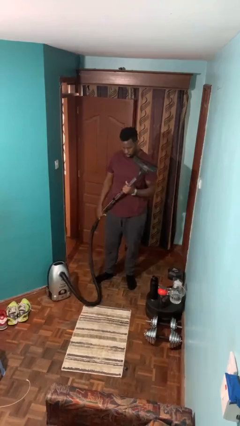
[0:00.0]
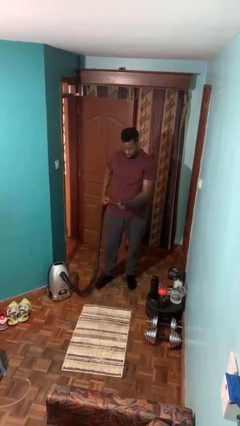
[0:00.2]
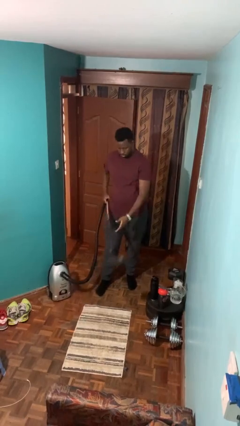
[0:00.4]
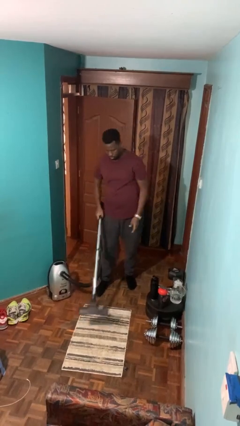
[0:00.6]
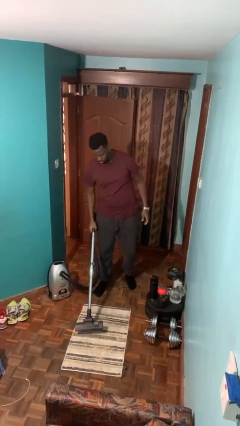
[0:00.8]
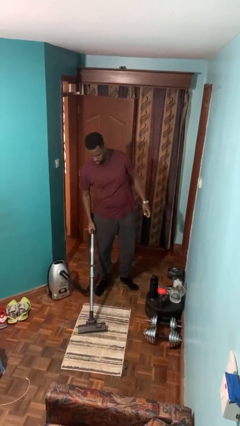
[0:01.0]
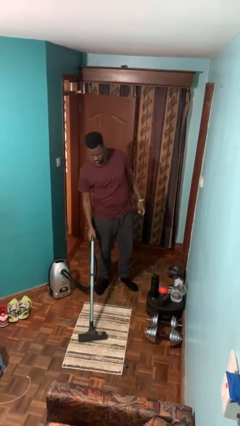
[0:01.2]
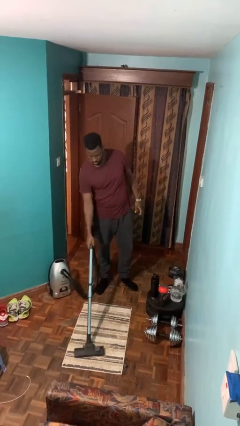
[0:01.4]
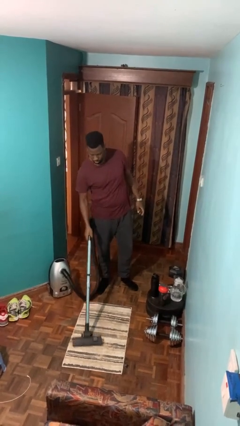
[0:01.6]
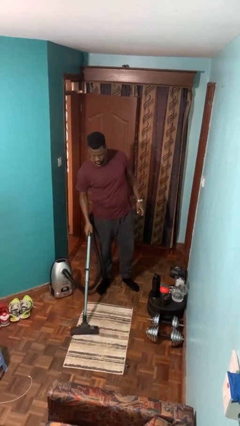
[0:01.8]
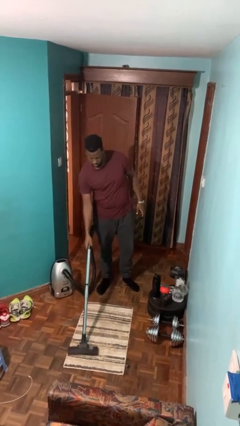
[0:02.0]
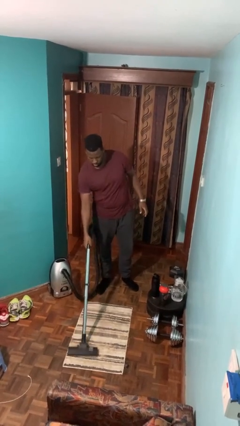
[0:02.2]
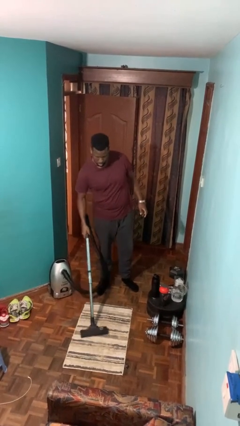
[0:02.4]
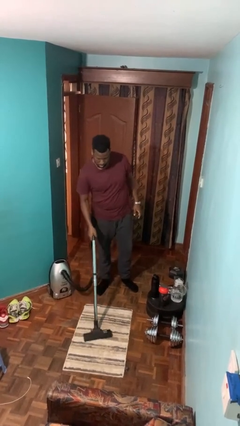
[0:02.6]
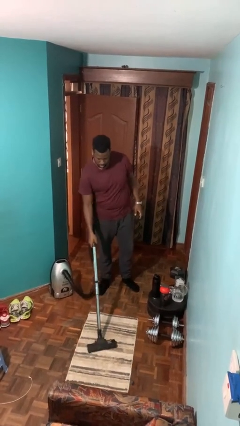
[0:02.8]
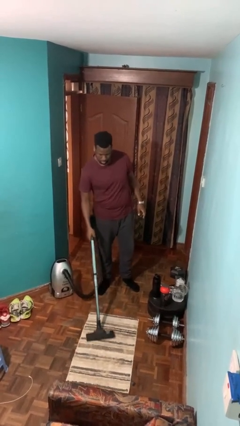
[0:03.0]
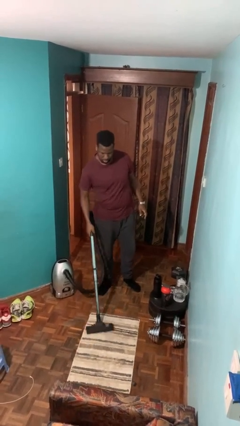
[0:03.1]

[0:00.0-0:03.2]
person vacuums carpet

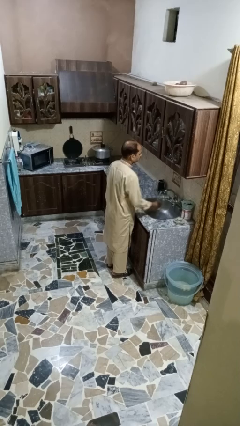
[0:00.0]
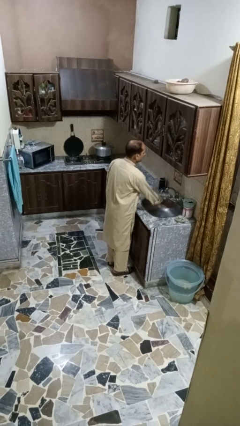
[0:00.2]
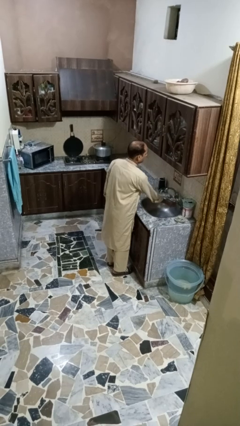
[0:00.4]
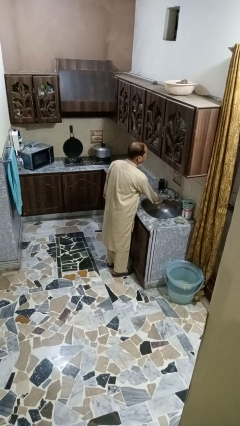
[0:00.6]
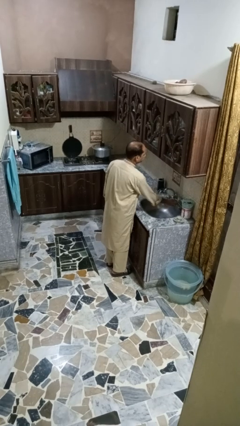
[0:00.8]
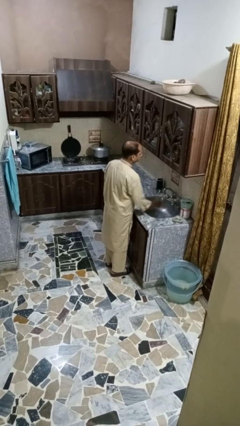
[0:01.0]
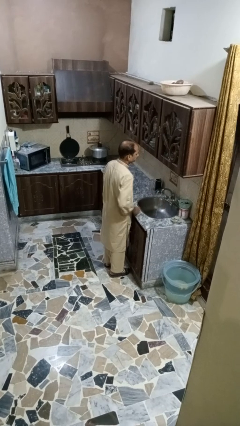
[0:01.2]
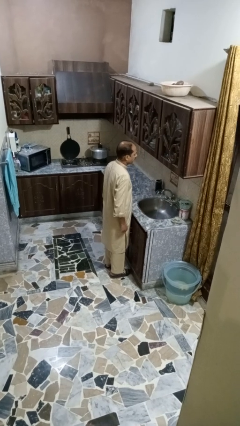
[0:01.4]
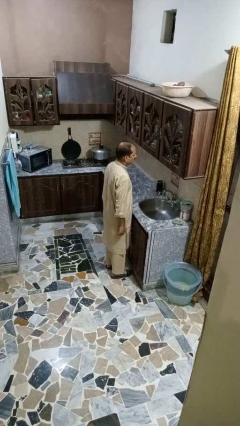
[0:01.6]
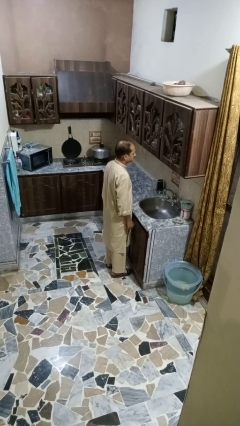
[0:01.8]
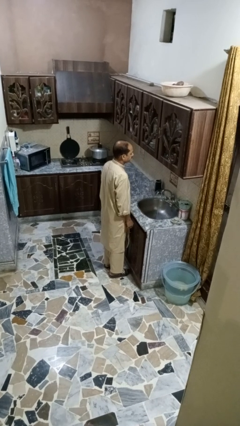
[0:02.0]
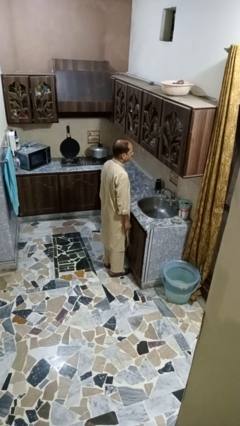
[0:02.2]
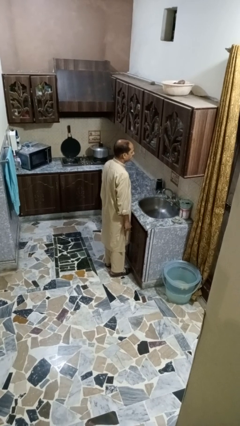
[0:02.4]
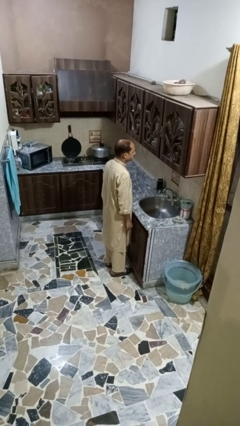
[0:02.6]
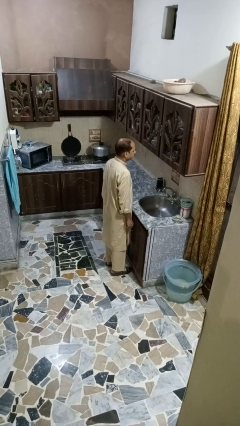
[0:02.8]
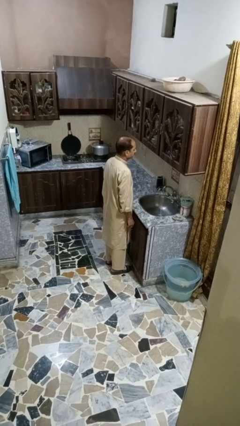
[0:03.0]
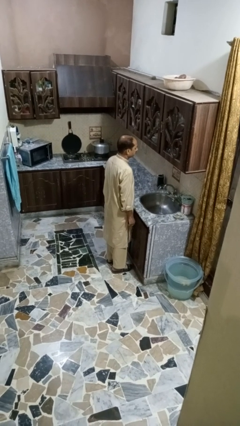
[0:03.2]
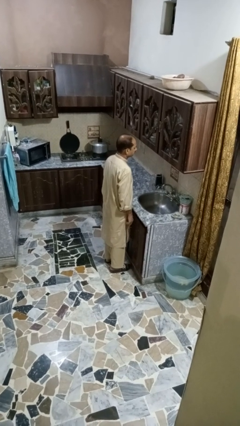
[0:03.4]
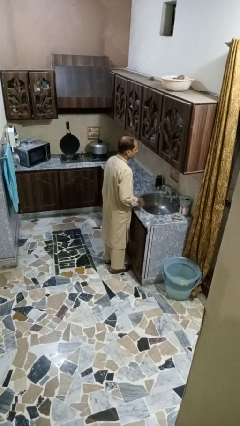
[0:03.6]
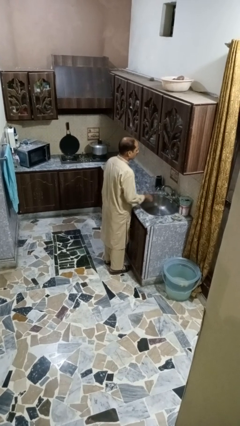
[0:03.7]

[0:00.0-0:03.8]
person turns on faucet

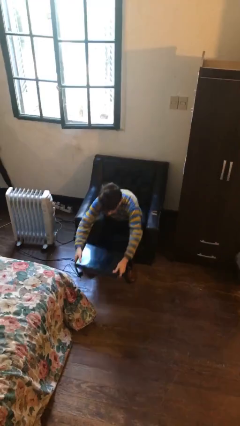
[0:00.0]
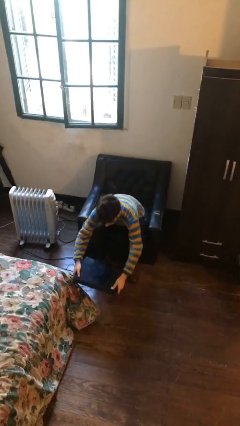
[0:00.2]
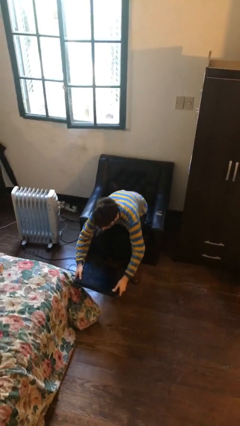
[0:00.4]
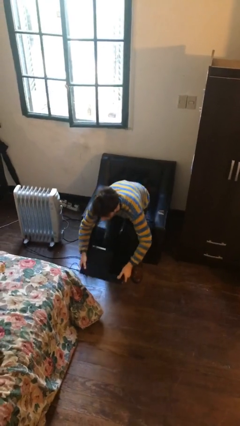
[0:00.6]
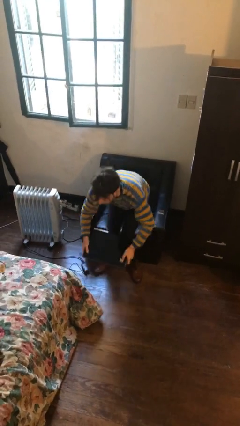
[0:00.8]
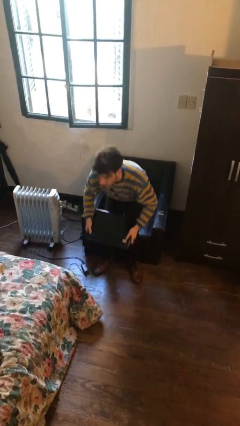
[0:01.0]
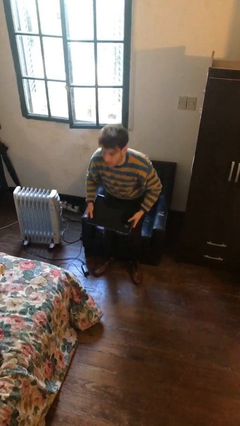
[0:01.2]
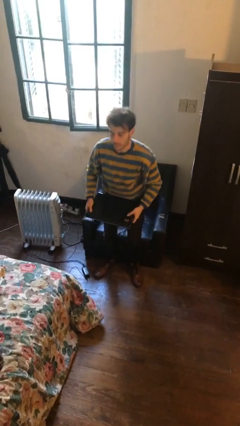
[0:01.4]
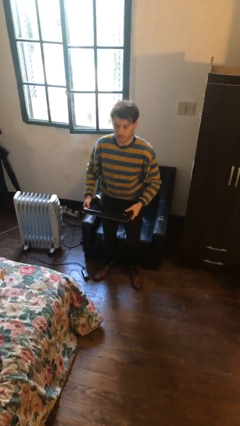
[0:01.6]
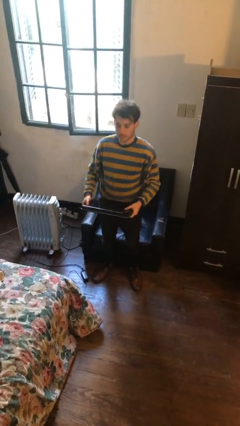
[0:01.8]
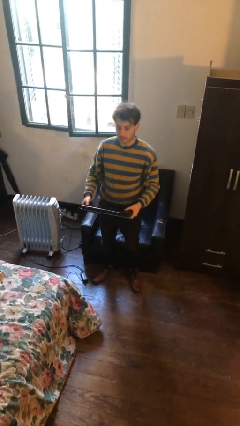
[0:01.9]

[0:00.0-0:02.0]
person stands up

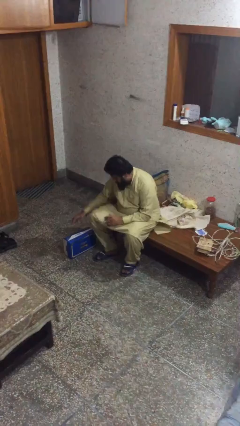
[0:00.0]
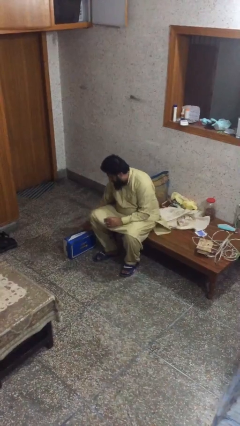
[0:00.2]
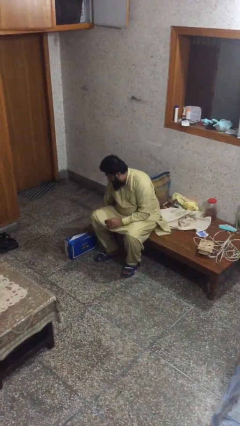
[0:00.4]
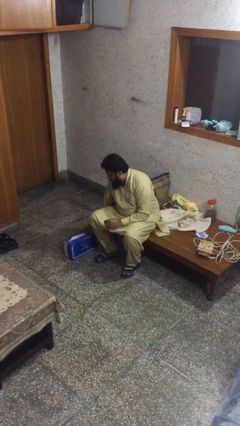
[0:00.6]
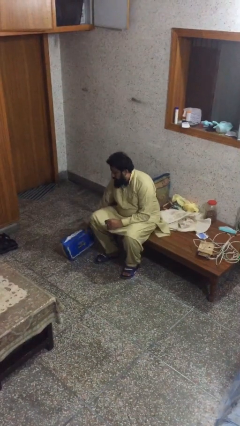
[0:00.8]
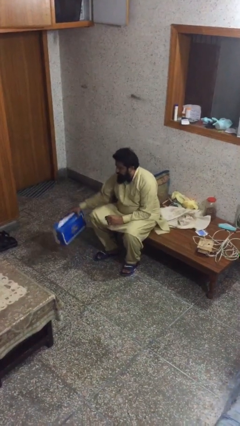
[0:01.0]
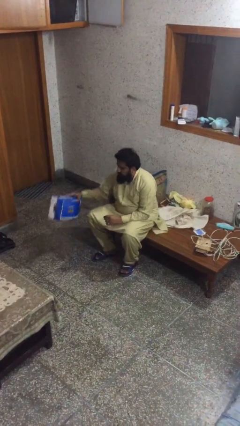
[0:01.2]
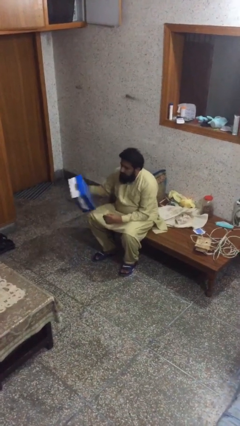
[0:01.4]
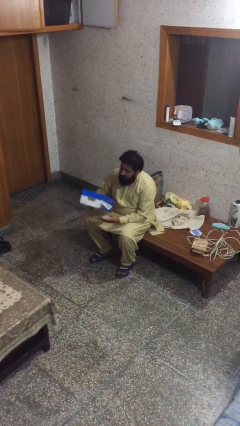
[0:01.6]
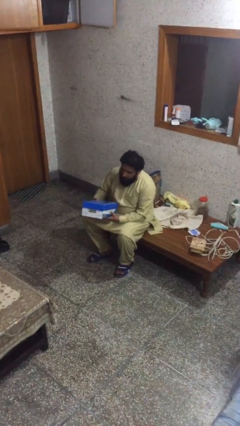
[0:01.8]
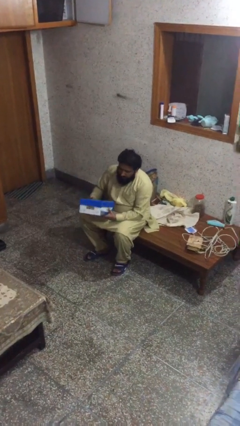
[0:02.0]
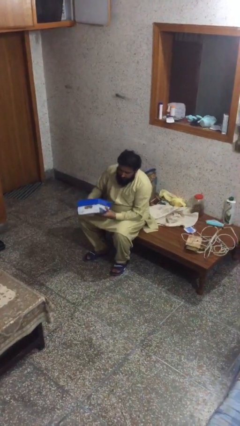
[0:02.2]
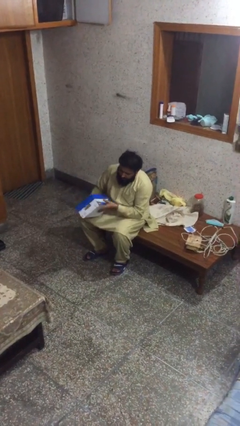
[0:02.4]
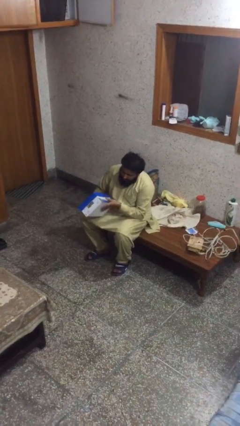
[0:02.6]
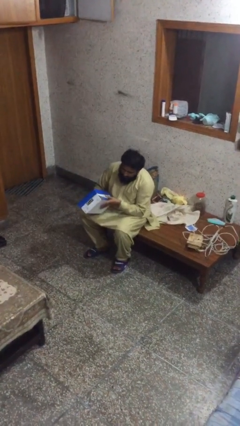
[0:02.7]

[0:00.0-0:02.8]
person picks up object from floor

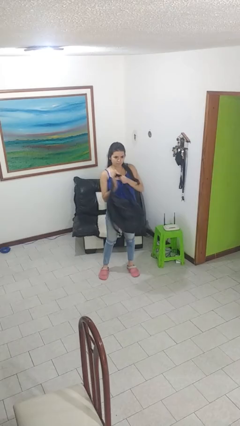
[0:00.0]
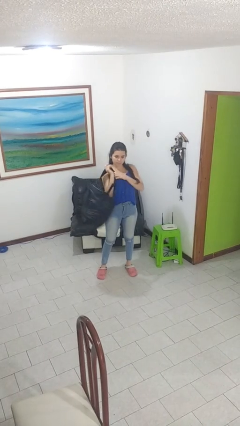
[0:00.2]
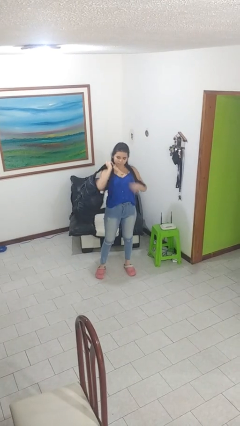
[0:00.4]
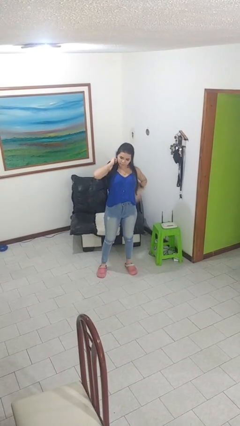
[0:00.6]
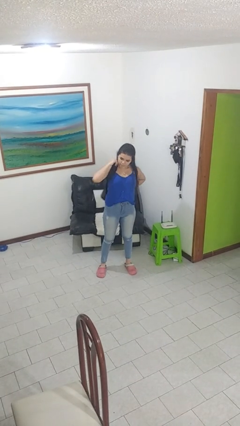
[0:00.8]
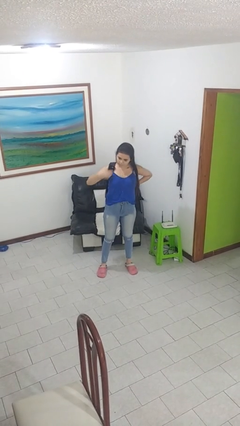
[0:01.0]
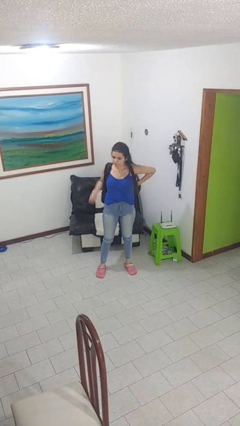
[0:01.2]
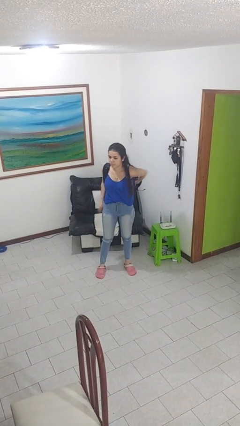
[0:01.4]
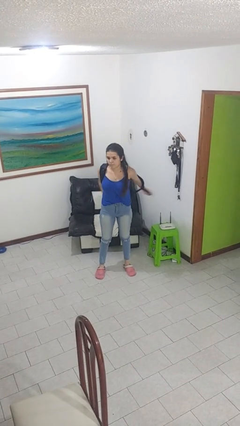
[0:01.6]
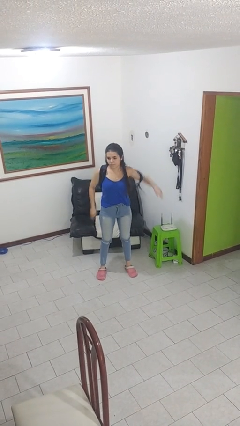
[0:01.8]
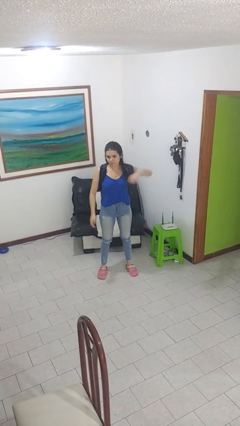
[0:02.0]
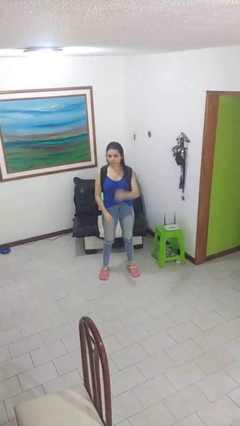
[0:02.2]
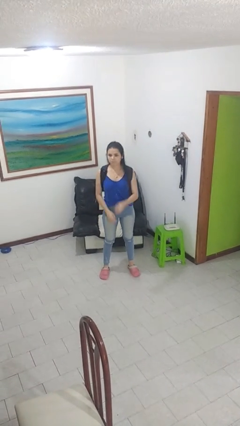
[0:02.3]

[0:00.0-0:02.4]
person puts on backpack

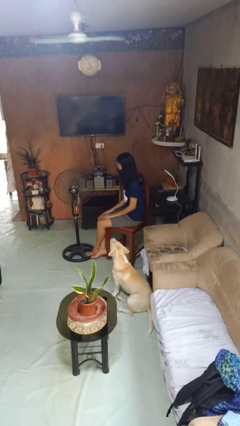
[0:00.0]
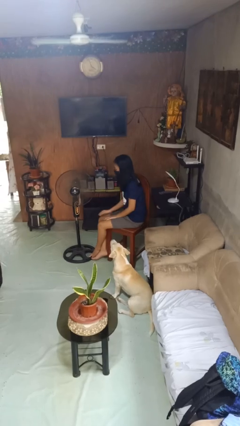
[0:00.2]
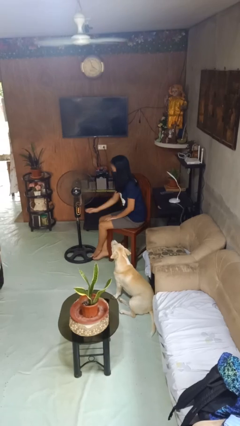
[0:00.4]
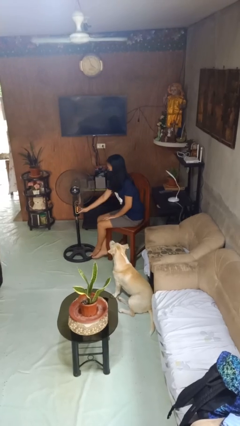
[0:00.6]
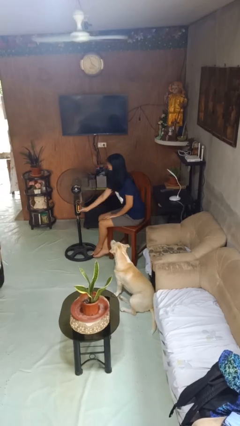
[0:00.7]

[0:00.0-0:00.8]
person turns off fan

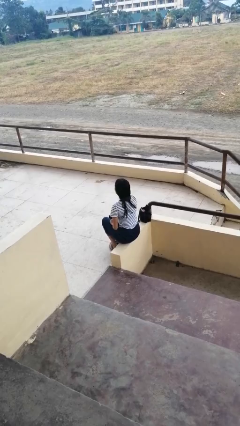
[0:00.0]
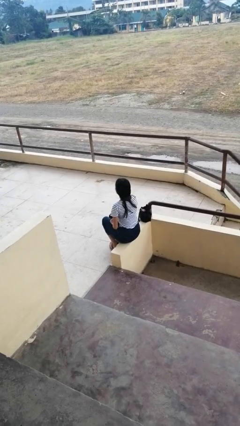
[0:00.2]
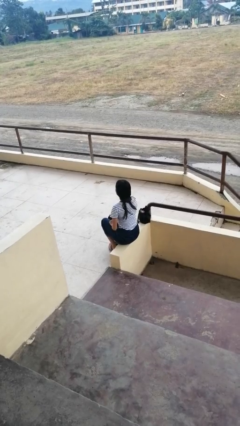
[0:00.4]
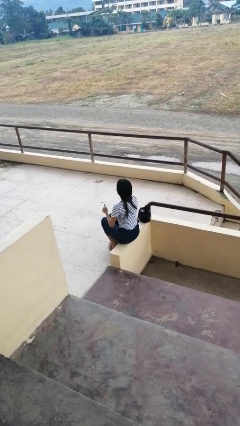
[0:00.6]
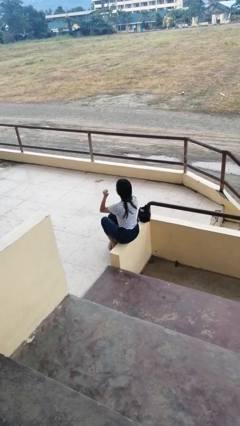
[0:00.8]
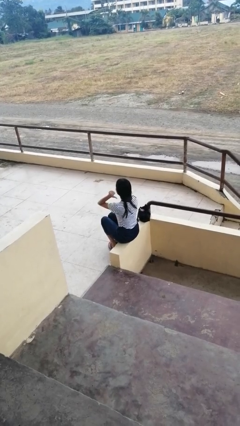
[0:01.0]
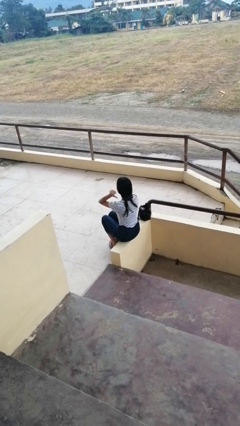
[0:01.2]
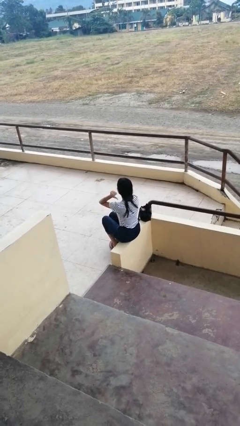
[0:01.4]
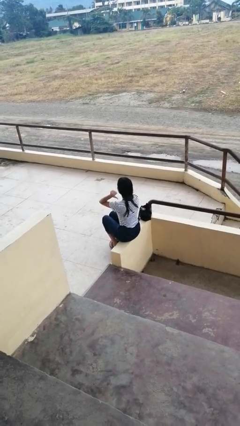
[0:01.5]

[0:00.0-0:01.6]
person gestures behind me

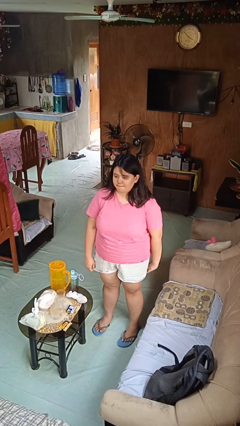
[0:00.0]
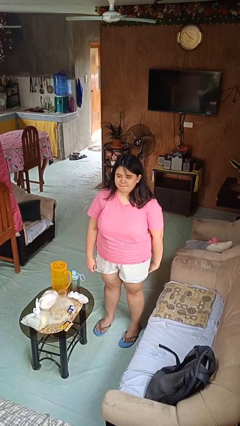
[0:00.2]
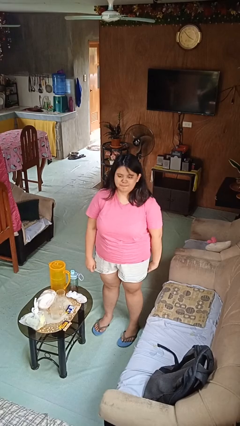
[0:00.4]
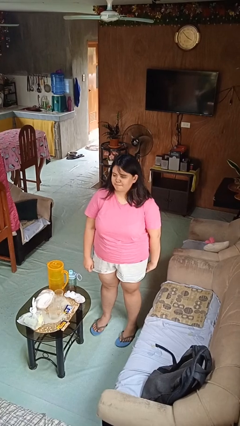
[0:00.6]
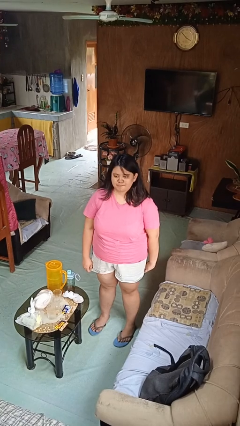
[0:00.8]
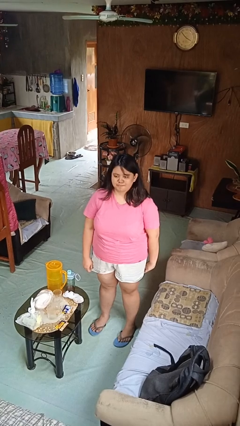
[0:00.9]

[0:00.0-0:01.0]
person shakes head
